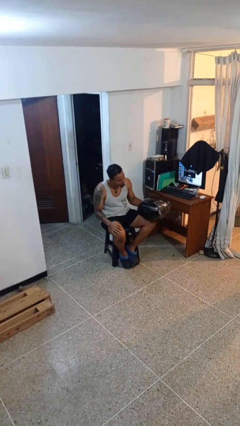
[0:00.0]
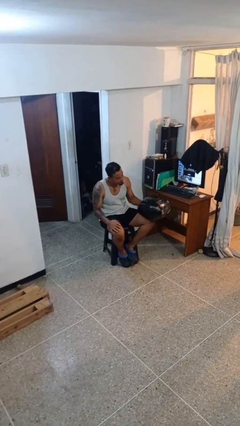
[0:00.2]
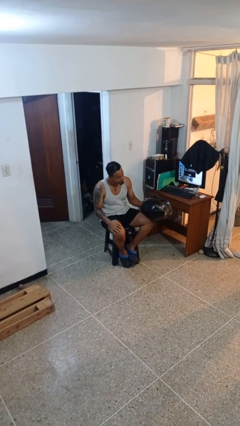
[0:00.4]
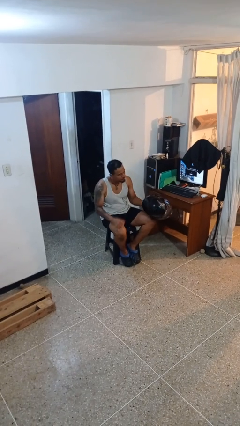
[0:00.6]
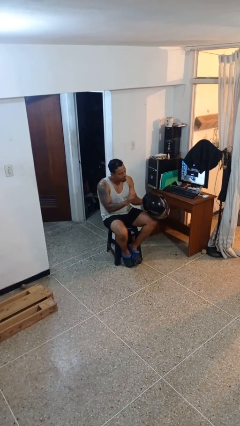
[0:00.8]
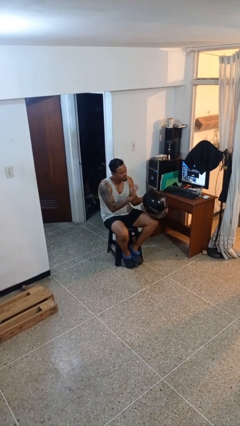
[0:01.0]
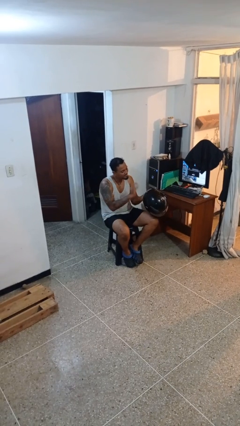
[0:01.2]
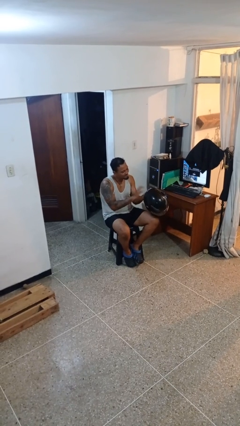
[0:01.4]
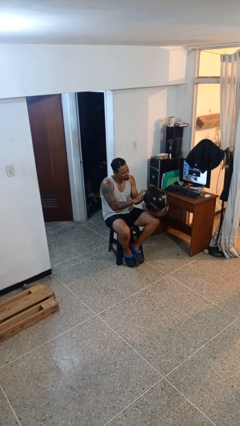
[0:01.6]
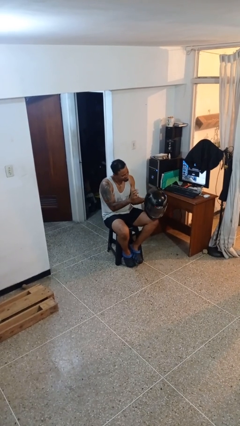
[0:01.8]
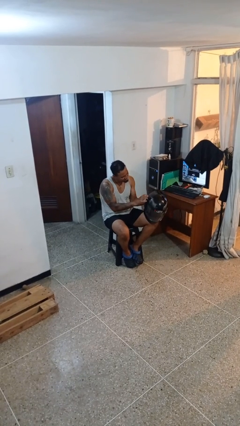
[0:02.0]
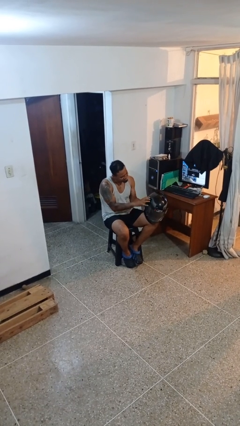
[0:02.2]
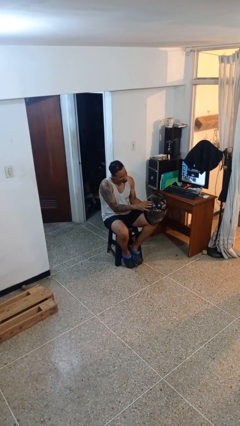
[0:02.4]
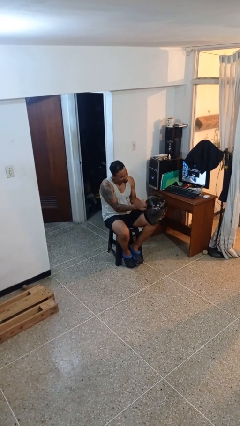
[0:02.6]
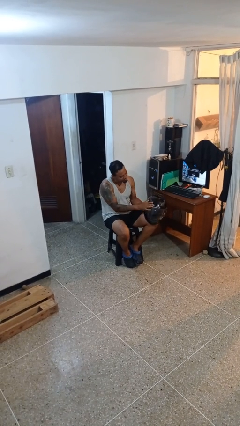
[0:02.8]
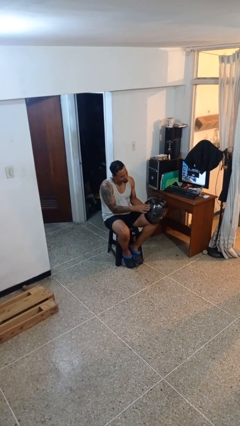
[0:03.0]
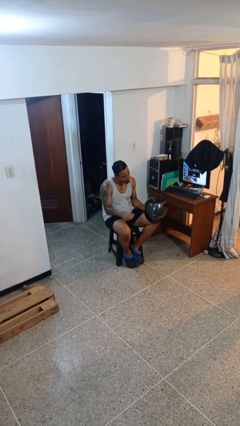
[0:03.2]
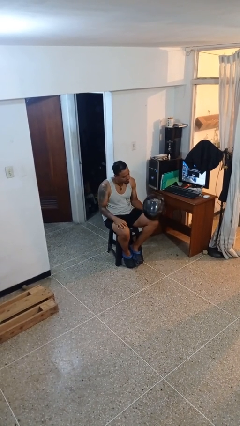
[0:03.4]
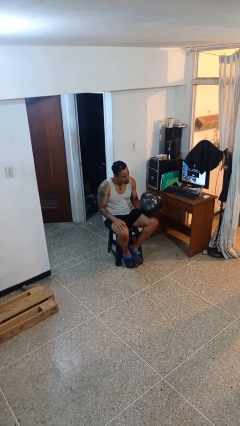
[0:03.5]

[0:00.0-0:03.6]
person taps object with finger

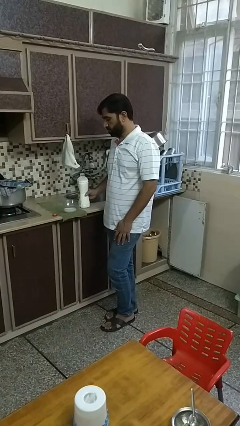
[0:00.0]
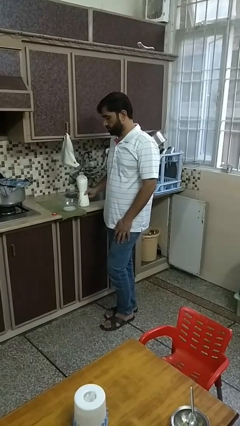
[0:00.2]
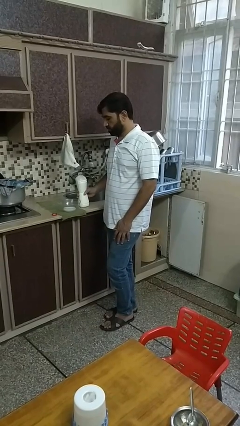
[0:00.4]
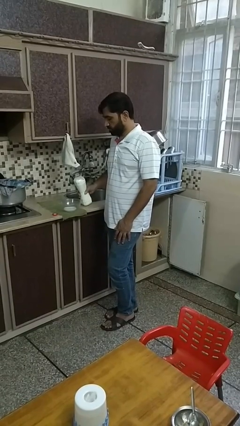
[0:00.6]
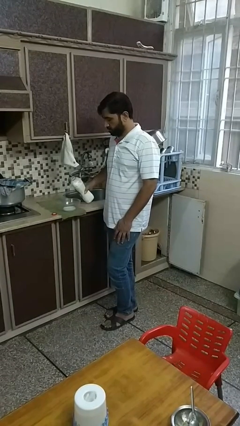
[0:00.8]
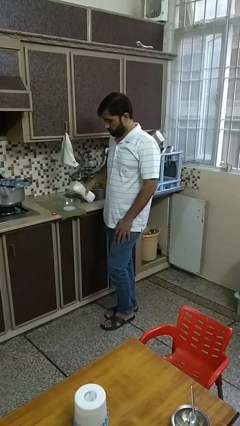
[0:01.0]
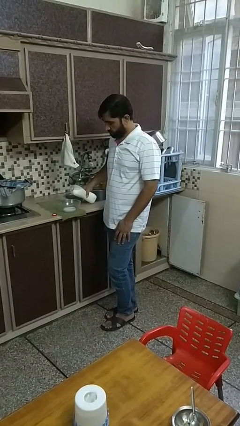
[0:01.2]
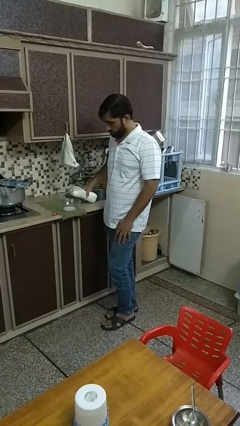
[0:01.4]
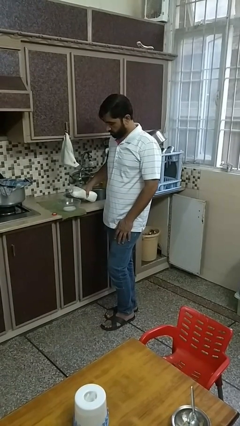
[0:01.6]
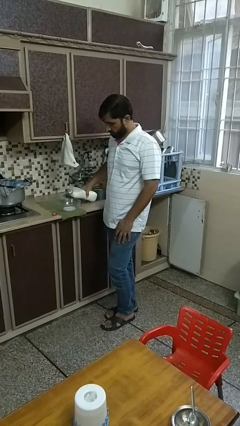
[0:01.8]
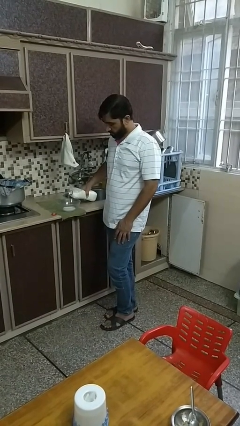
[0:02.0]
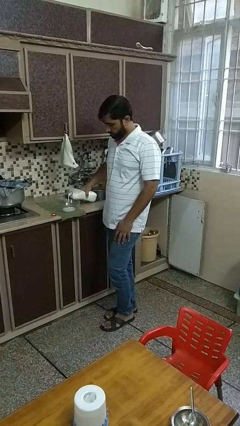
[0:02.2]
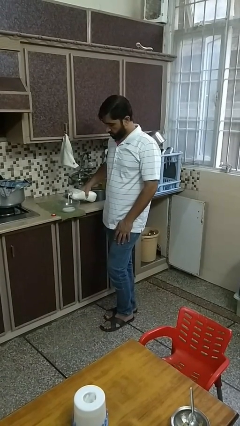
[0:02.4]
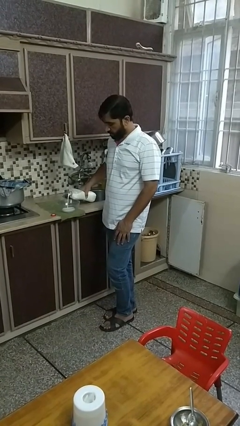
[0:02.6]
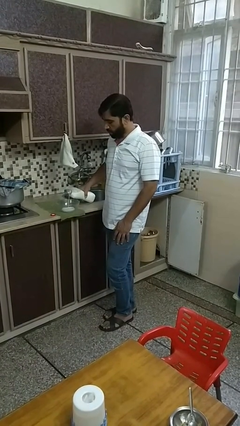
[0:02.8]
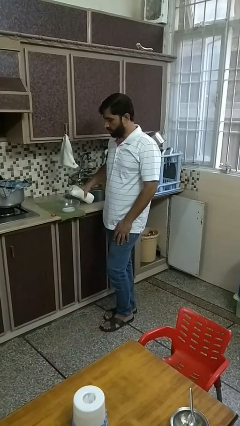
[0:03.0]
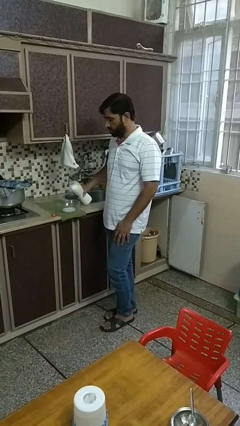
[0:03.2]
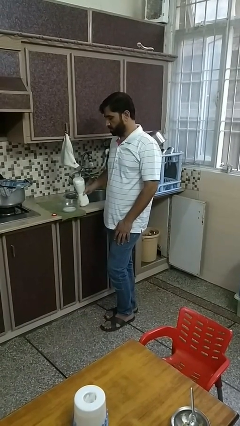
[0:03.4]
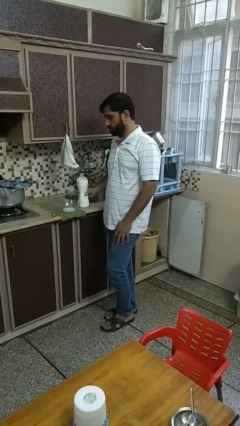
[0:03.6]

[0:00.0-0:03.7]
person pours into bowl

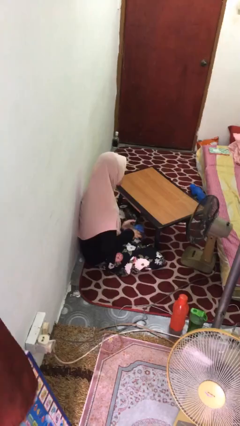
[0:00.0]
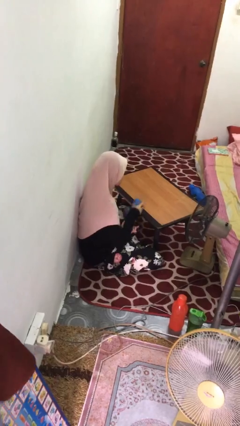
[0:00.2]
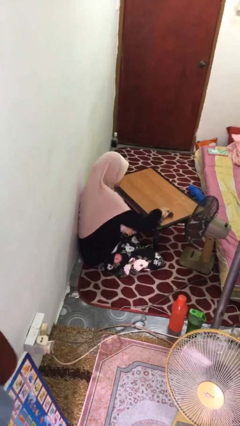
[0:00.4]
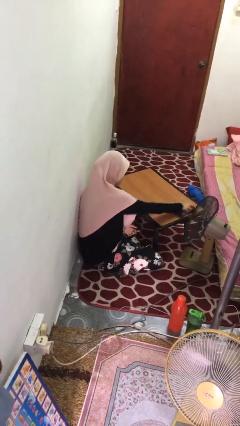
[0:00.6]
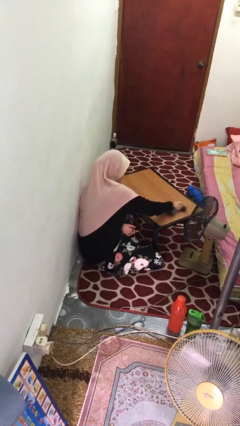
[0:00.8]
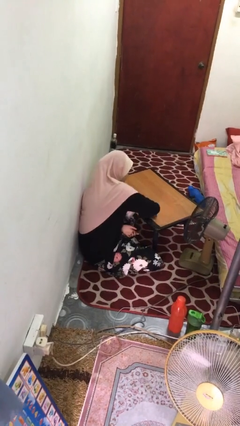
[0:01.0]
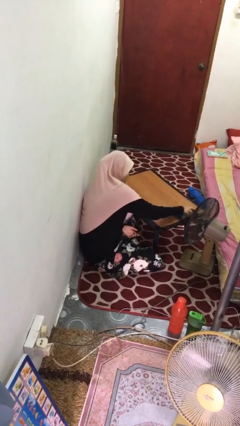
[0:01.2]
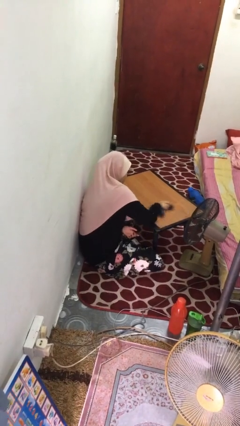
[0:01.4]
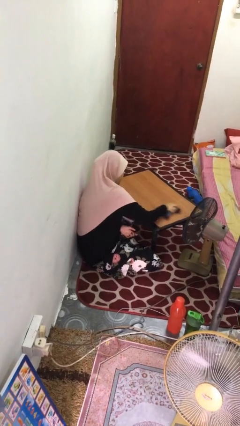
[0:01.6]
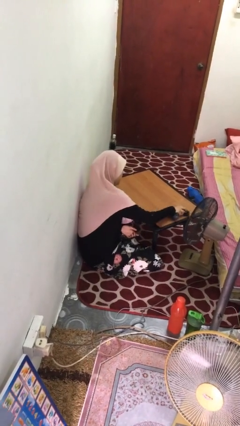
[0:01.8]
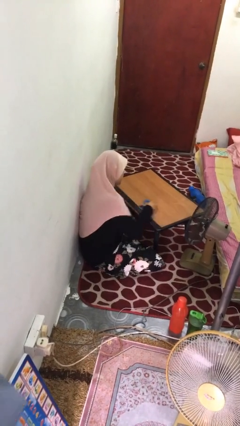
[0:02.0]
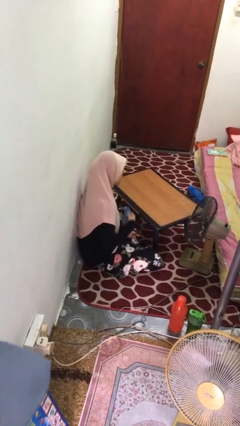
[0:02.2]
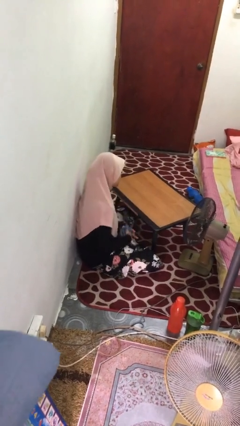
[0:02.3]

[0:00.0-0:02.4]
person cleans table with rag

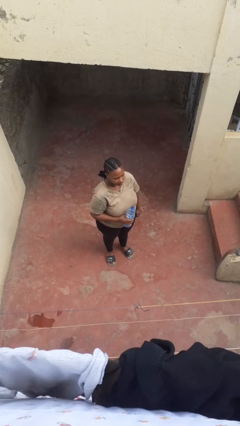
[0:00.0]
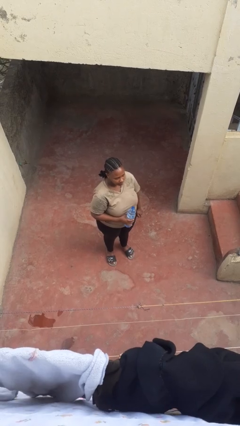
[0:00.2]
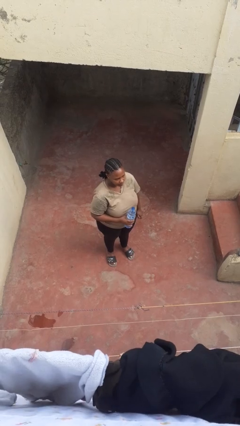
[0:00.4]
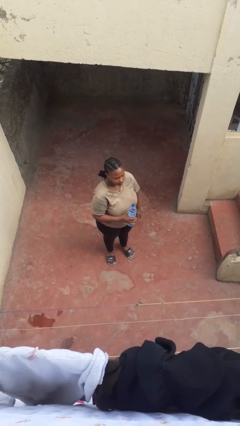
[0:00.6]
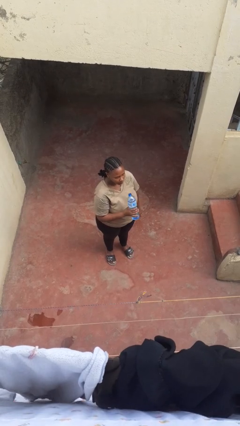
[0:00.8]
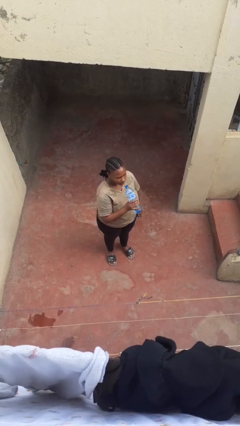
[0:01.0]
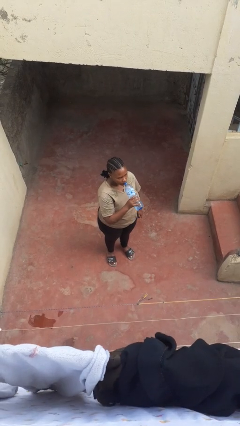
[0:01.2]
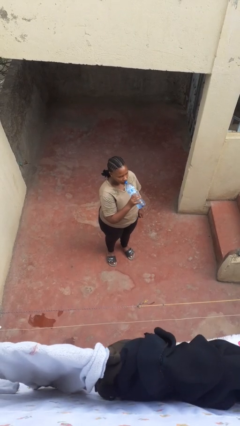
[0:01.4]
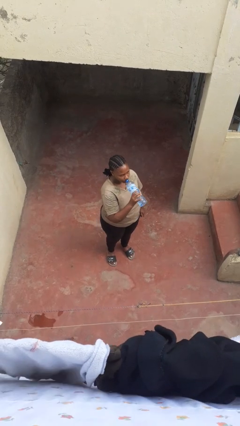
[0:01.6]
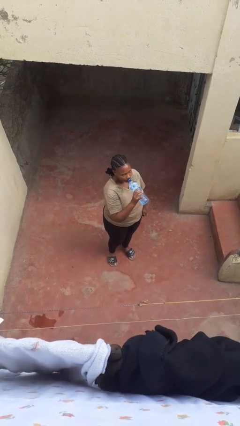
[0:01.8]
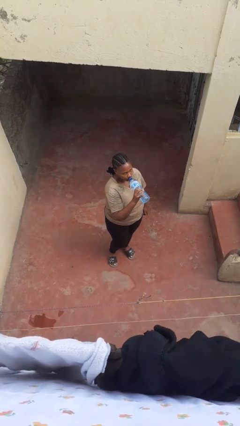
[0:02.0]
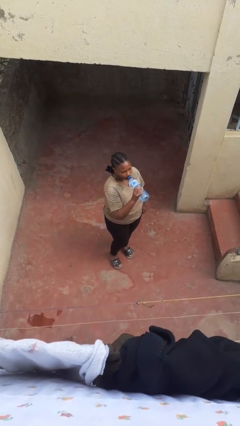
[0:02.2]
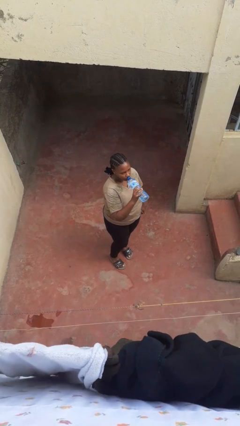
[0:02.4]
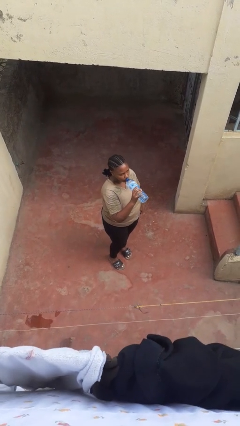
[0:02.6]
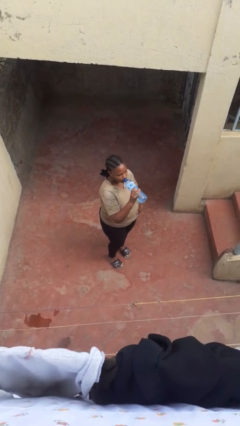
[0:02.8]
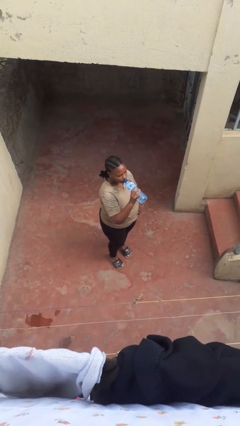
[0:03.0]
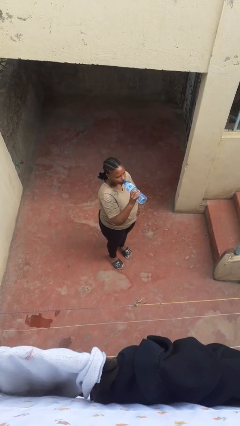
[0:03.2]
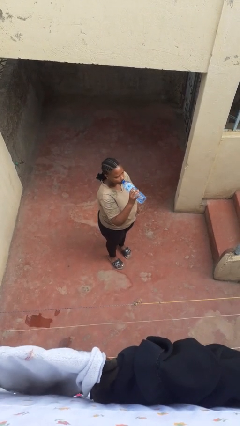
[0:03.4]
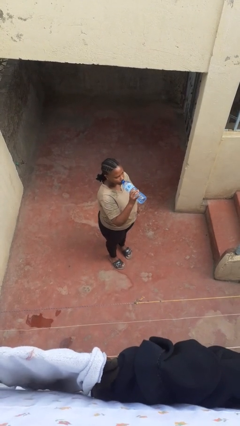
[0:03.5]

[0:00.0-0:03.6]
person drinks from bottle

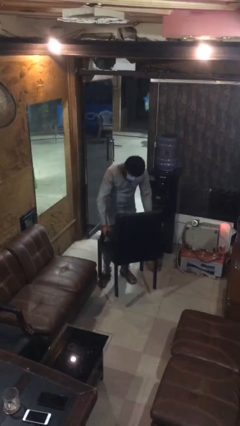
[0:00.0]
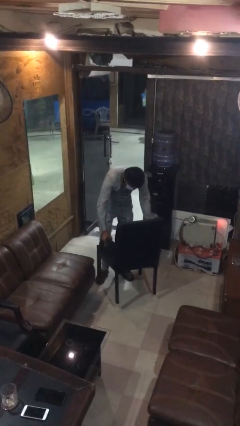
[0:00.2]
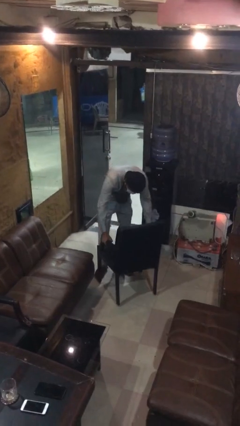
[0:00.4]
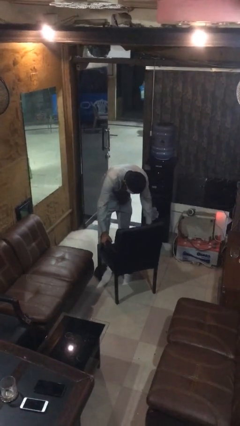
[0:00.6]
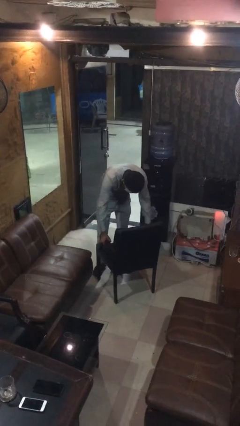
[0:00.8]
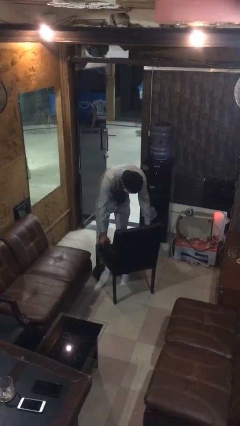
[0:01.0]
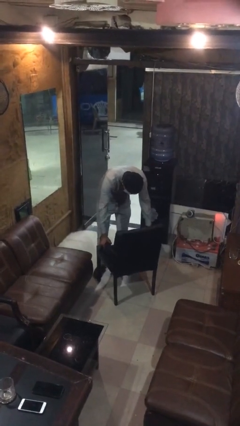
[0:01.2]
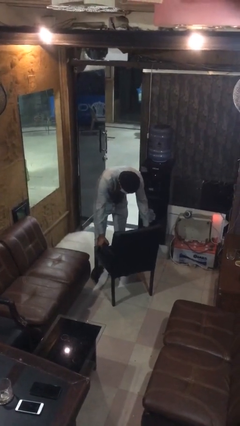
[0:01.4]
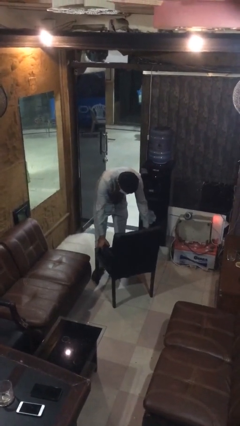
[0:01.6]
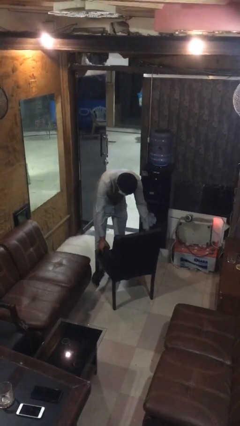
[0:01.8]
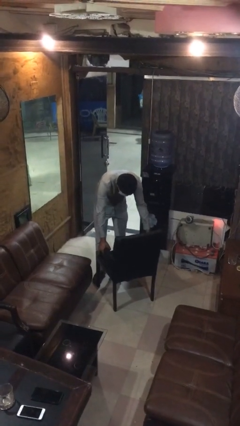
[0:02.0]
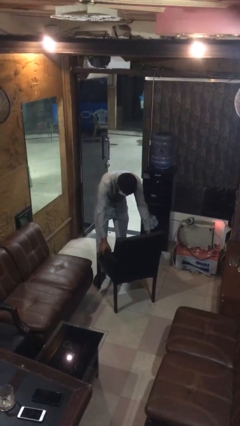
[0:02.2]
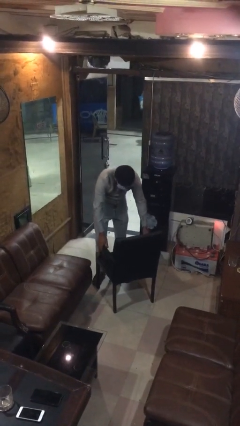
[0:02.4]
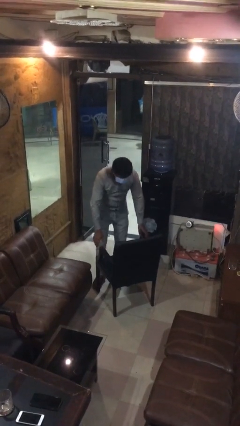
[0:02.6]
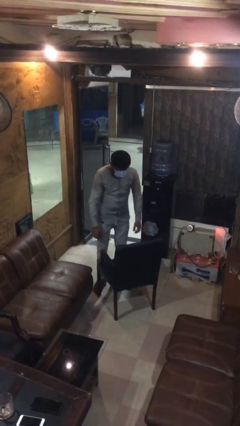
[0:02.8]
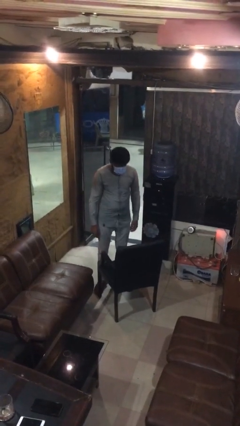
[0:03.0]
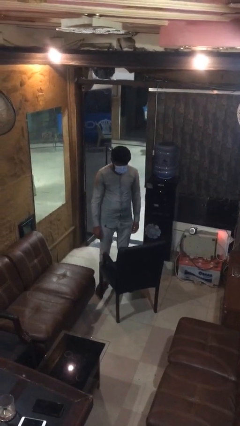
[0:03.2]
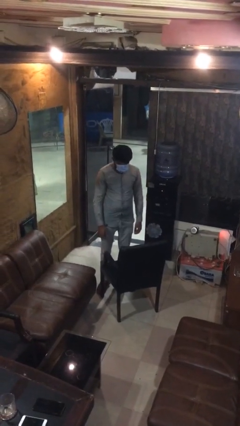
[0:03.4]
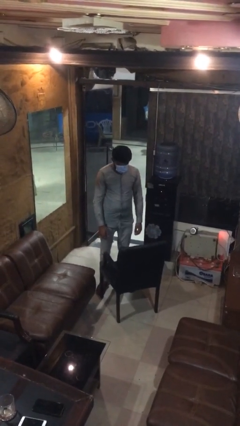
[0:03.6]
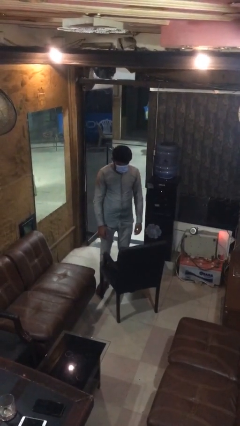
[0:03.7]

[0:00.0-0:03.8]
person puts down object on floor

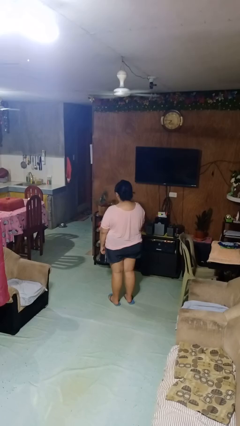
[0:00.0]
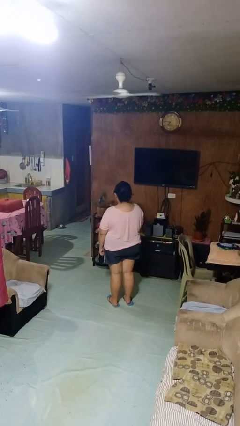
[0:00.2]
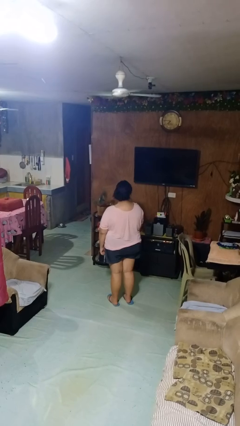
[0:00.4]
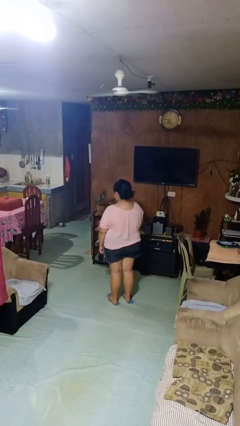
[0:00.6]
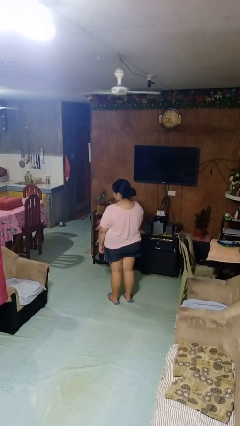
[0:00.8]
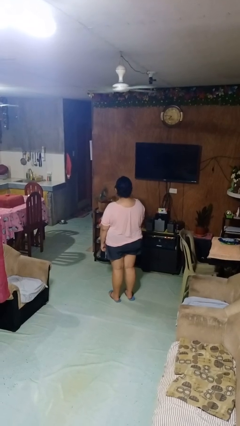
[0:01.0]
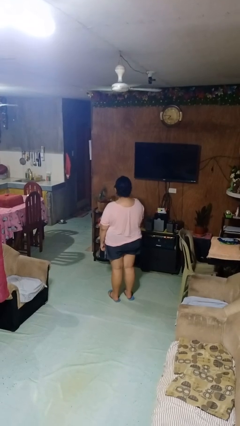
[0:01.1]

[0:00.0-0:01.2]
person shakes head
